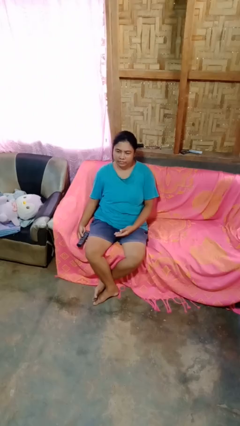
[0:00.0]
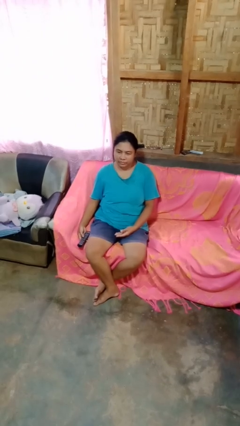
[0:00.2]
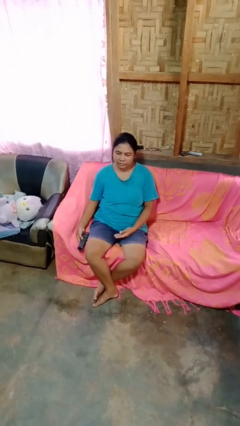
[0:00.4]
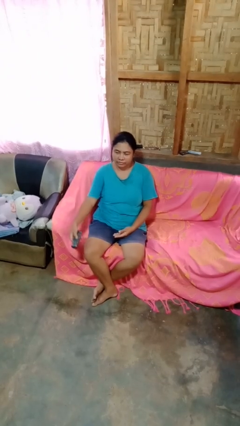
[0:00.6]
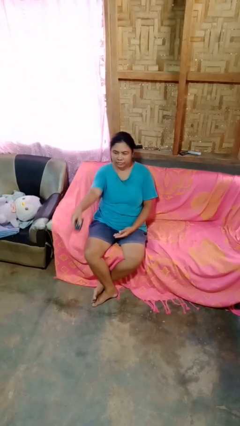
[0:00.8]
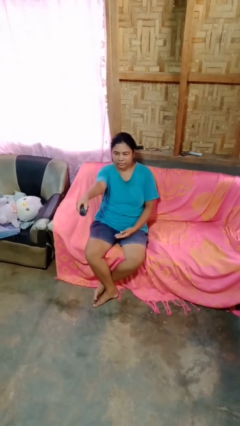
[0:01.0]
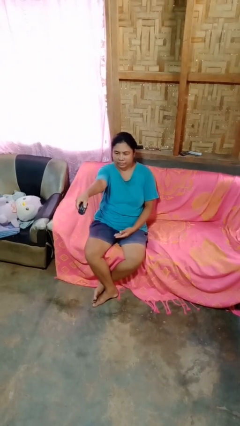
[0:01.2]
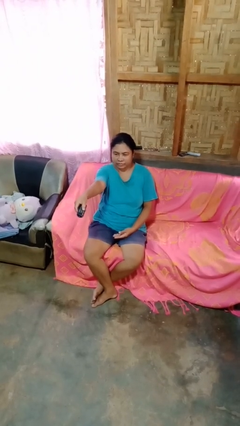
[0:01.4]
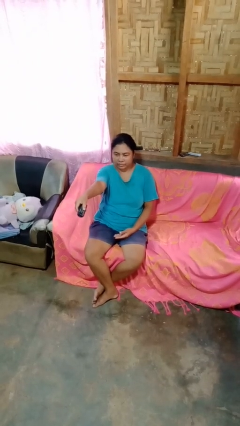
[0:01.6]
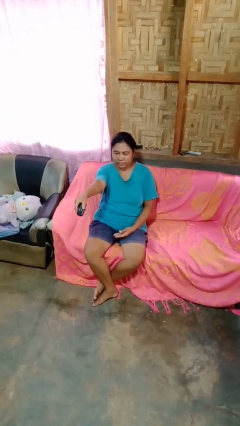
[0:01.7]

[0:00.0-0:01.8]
person uses television remote

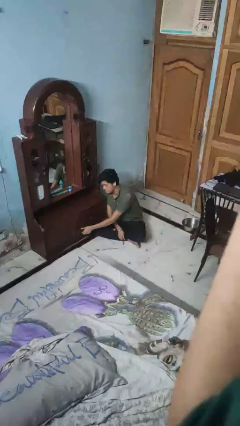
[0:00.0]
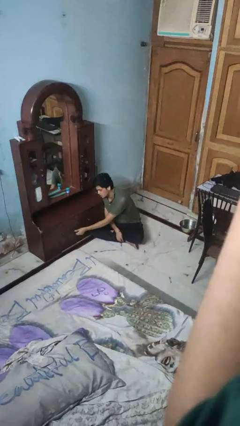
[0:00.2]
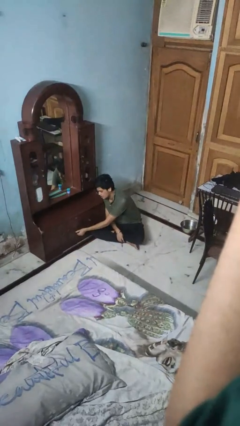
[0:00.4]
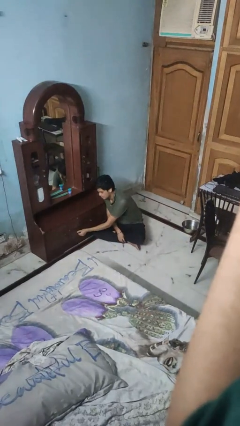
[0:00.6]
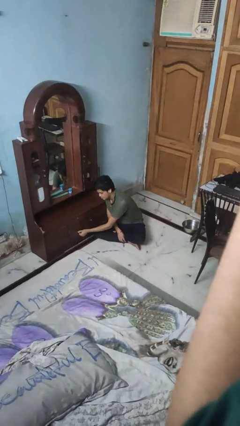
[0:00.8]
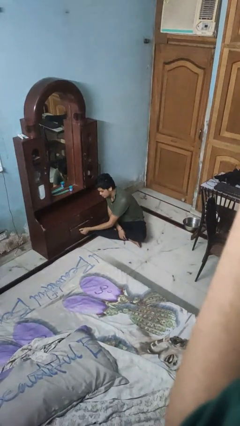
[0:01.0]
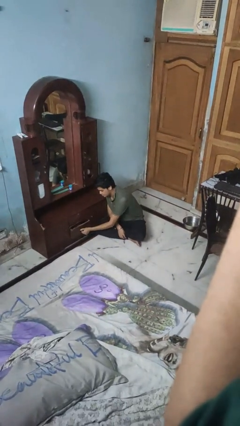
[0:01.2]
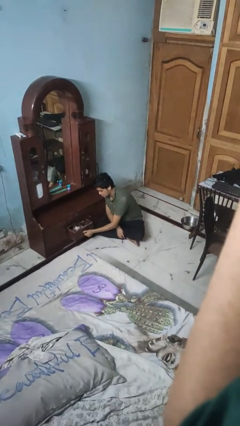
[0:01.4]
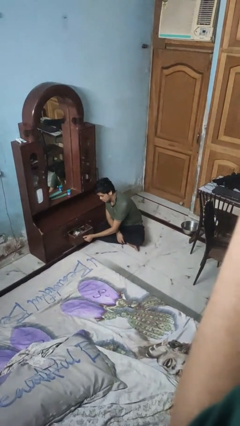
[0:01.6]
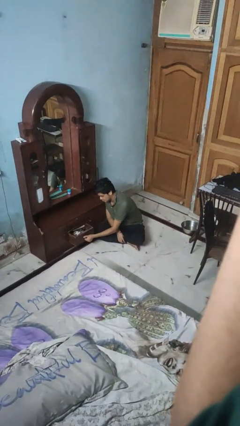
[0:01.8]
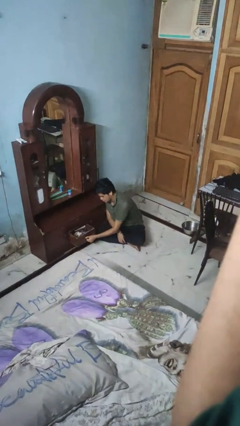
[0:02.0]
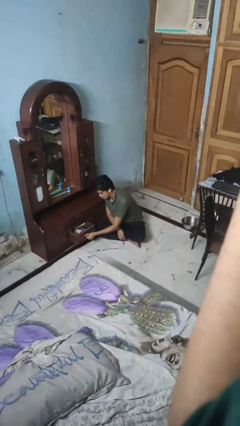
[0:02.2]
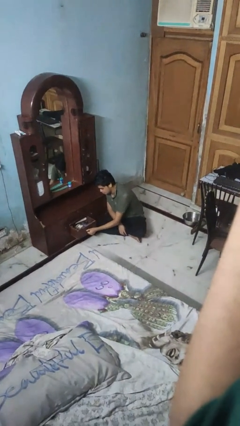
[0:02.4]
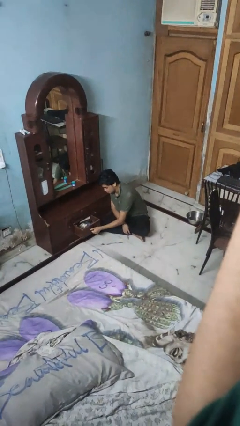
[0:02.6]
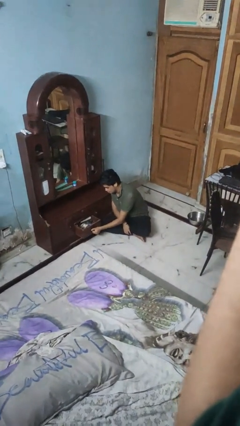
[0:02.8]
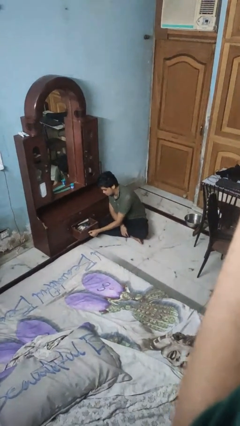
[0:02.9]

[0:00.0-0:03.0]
person opens dresser drawer

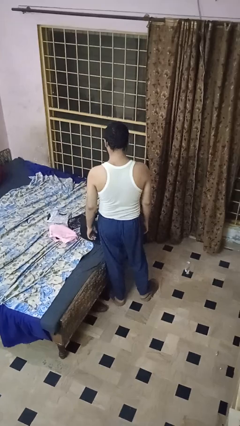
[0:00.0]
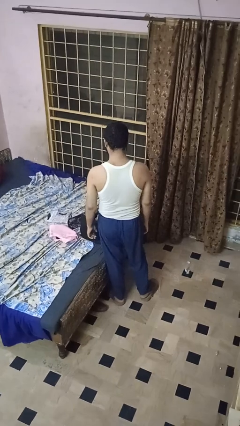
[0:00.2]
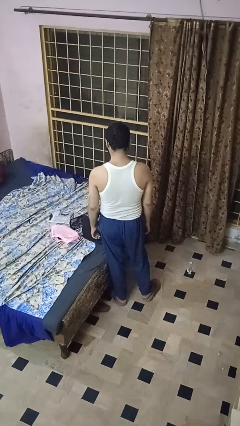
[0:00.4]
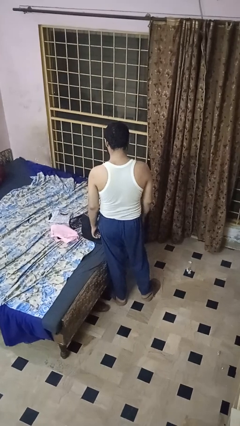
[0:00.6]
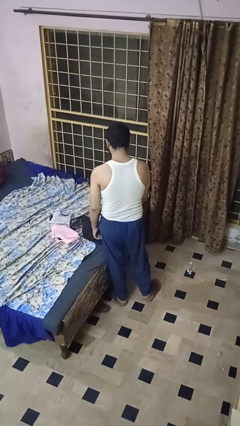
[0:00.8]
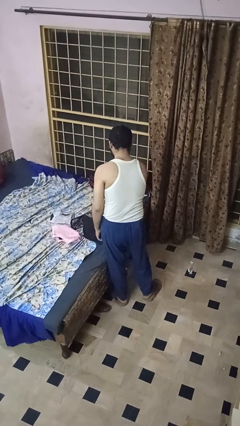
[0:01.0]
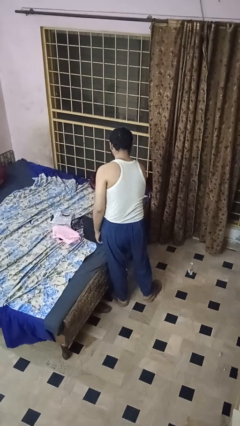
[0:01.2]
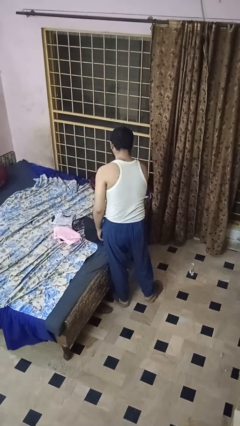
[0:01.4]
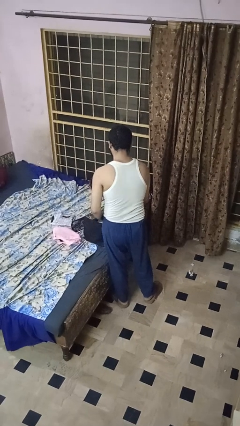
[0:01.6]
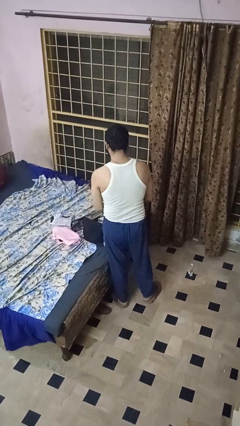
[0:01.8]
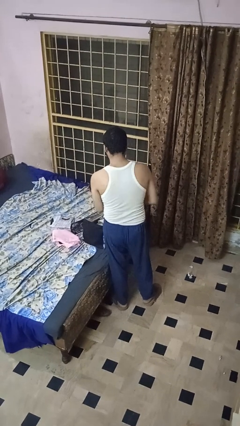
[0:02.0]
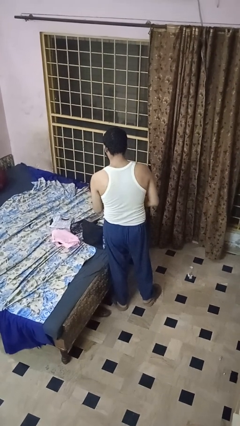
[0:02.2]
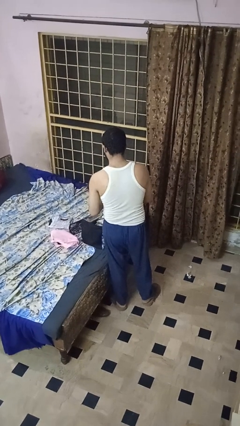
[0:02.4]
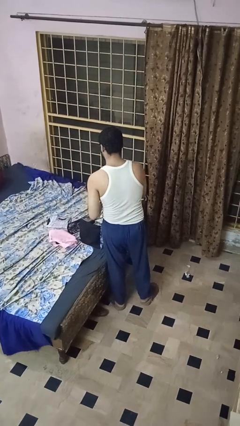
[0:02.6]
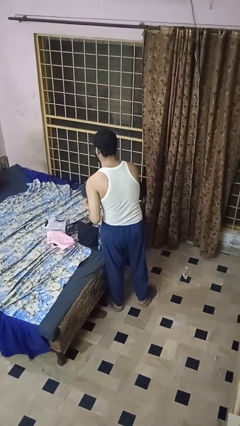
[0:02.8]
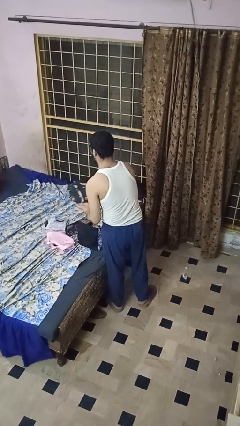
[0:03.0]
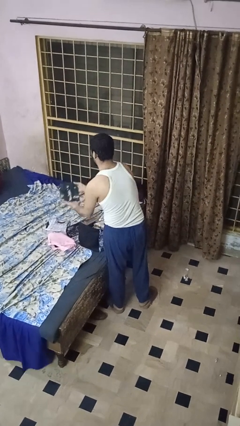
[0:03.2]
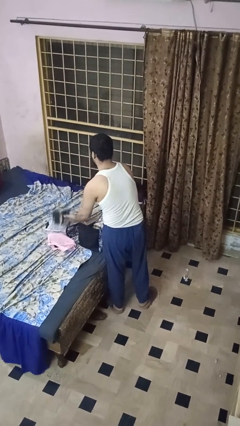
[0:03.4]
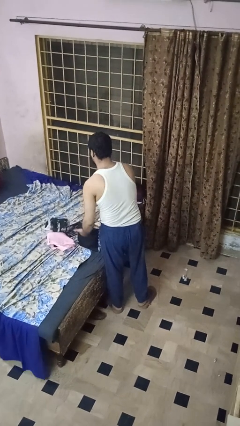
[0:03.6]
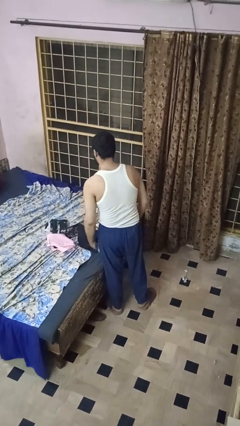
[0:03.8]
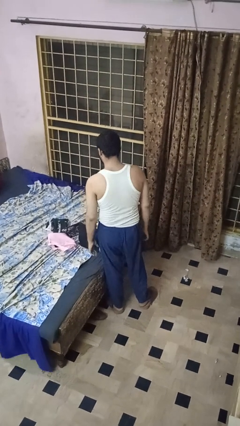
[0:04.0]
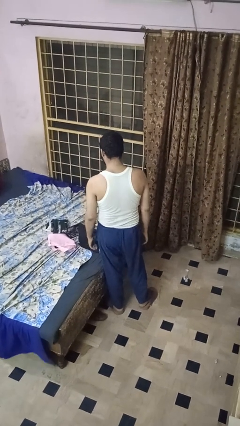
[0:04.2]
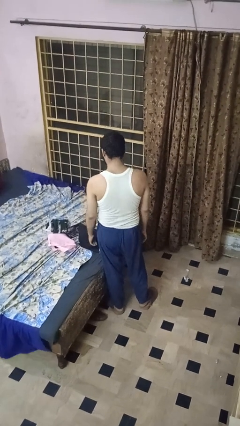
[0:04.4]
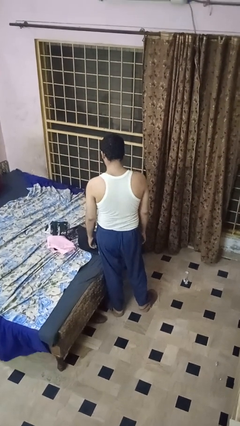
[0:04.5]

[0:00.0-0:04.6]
person unloads clothes from suitcase

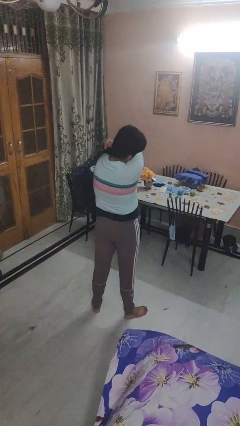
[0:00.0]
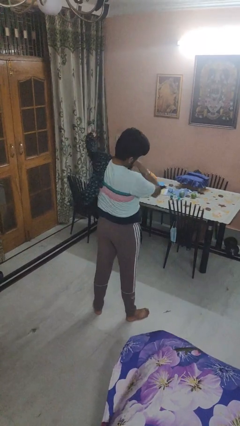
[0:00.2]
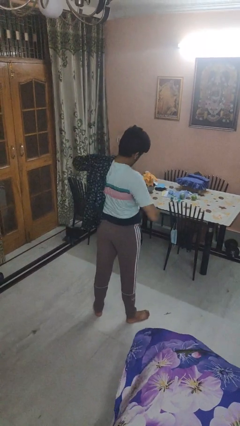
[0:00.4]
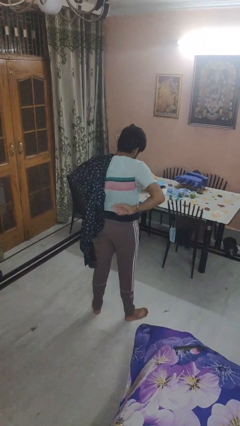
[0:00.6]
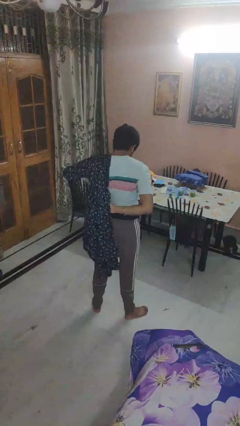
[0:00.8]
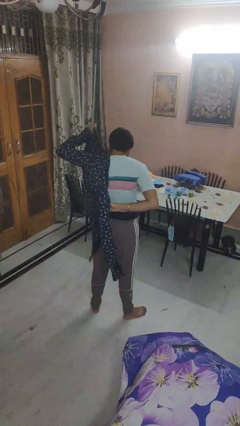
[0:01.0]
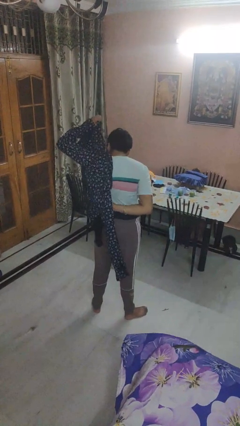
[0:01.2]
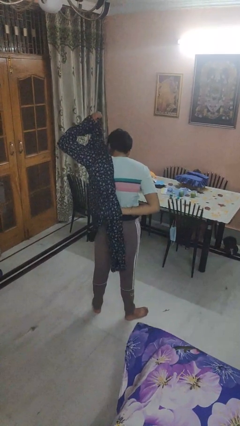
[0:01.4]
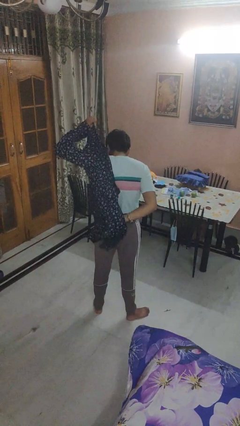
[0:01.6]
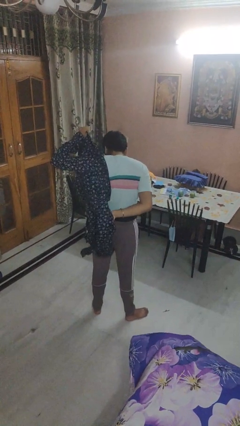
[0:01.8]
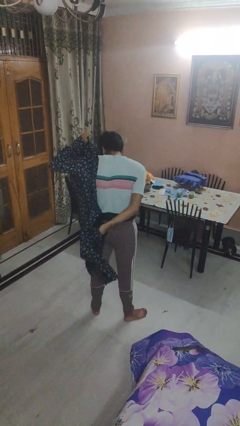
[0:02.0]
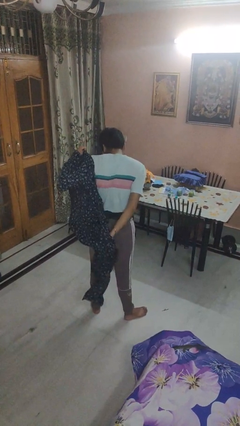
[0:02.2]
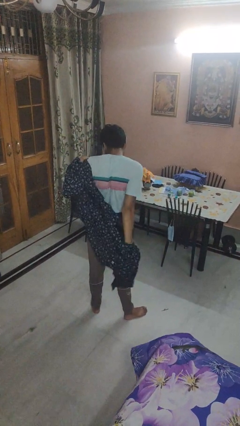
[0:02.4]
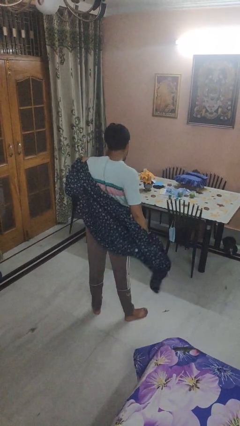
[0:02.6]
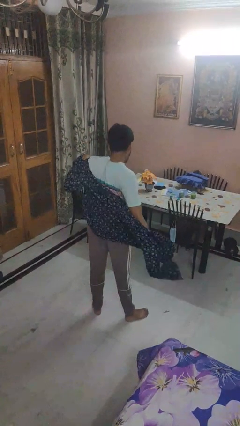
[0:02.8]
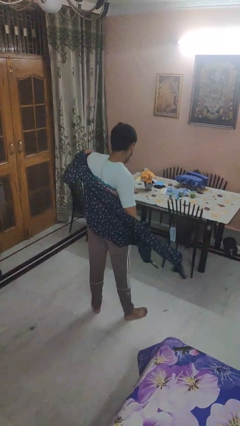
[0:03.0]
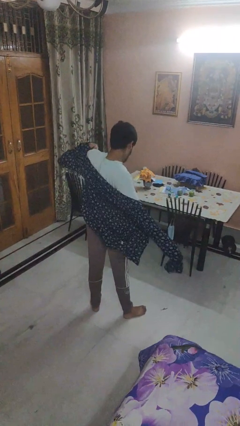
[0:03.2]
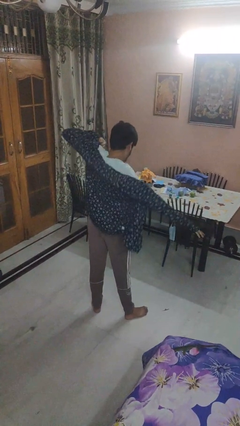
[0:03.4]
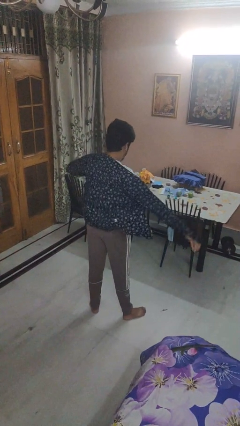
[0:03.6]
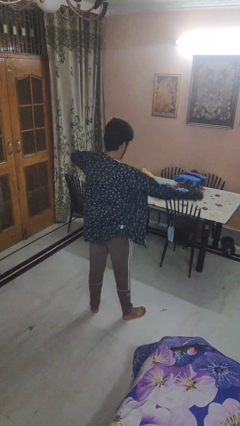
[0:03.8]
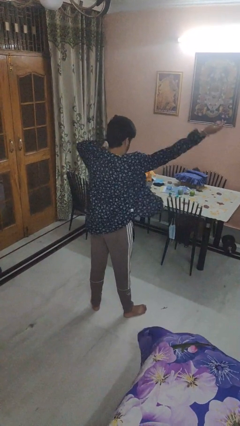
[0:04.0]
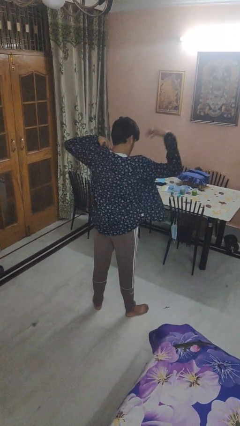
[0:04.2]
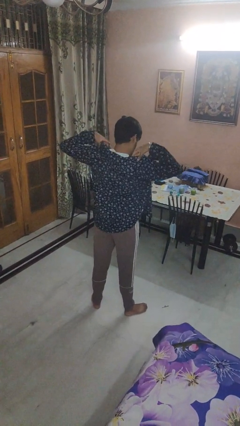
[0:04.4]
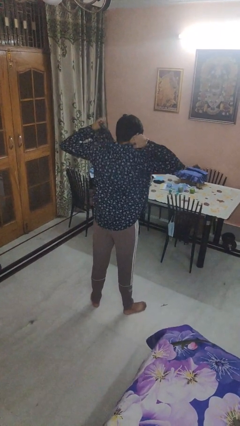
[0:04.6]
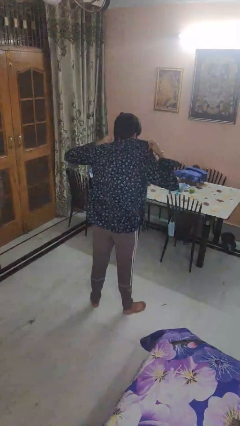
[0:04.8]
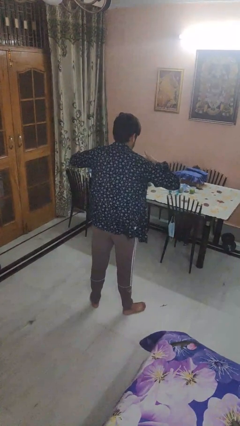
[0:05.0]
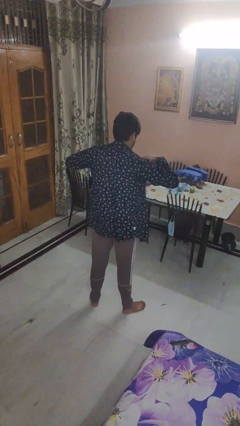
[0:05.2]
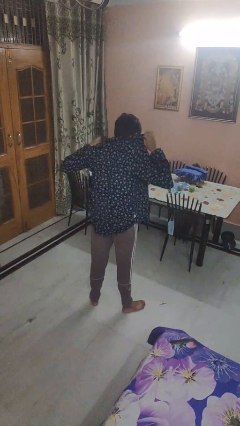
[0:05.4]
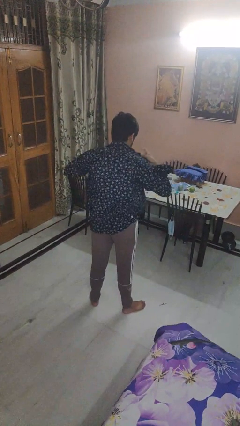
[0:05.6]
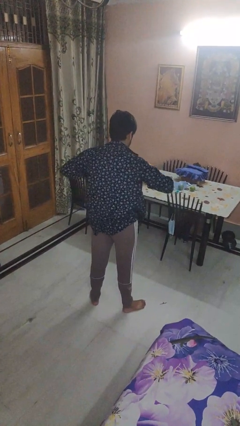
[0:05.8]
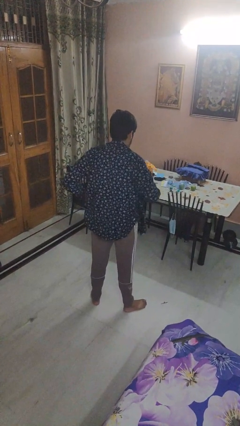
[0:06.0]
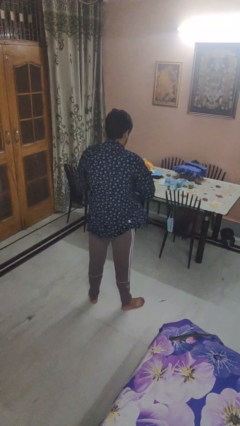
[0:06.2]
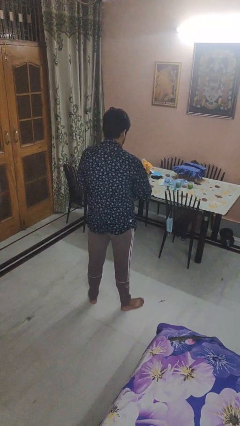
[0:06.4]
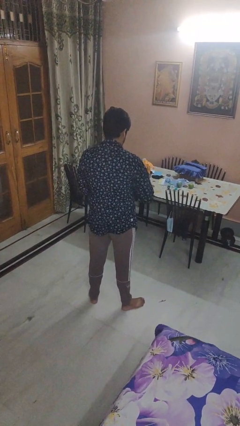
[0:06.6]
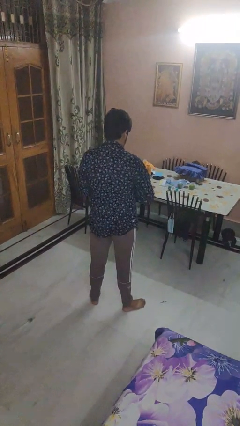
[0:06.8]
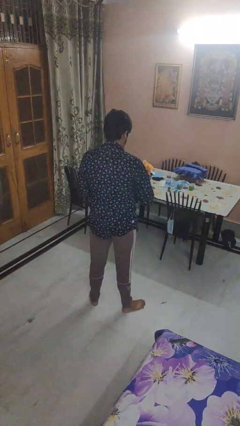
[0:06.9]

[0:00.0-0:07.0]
person puts on shirt

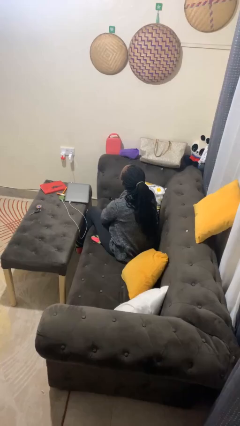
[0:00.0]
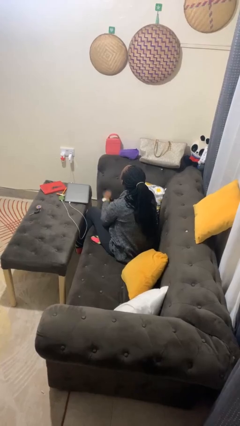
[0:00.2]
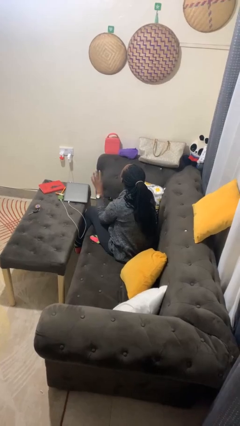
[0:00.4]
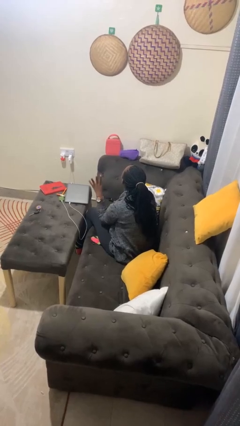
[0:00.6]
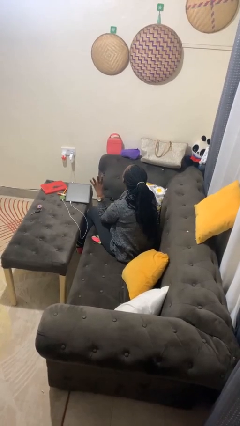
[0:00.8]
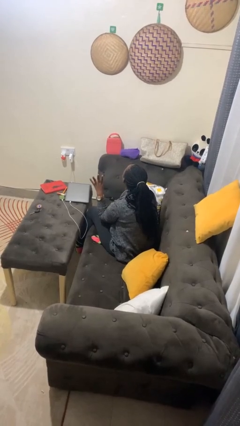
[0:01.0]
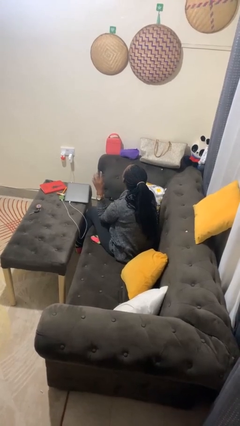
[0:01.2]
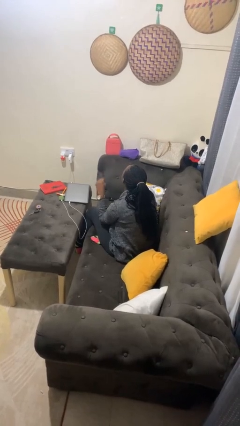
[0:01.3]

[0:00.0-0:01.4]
person gestures number four
